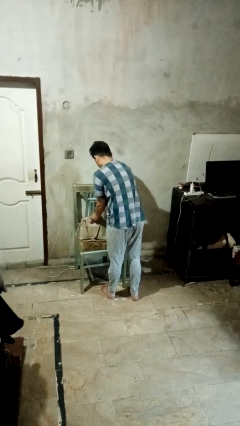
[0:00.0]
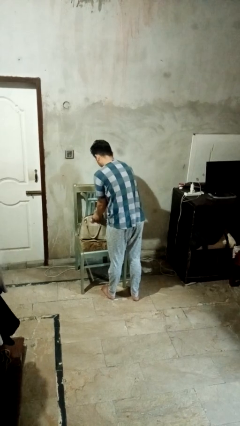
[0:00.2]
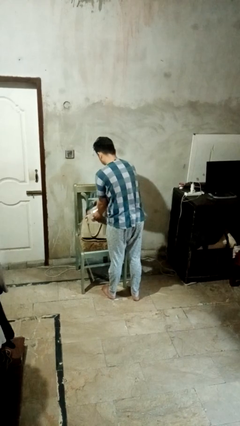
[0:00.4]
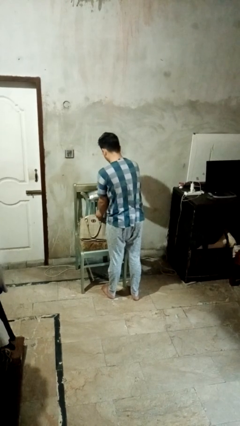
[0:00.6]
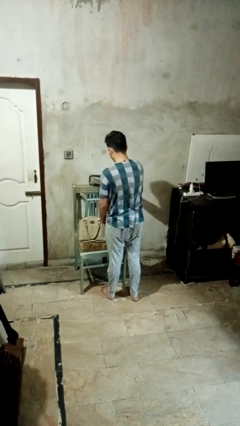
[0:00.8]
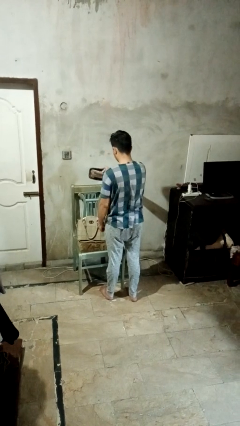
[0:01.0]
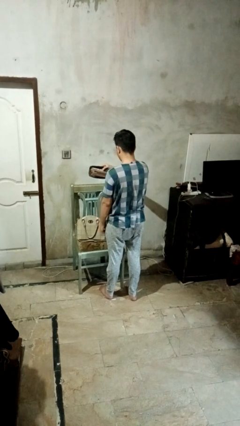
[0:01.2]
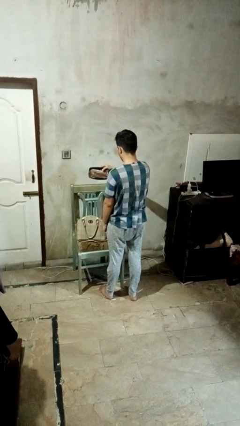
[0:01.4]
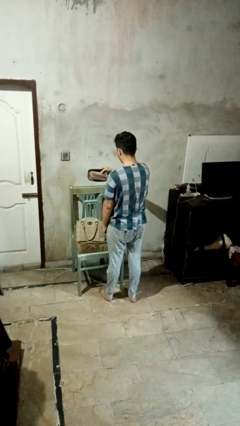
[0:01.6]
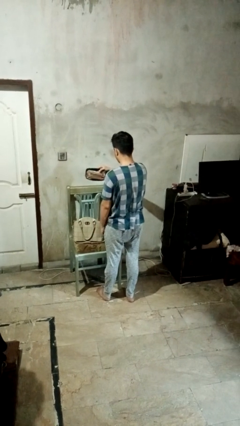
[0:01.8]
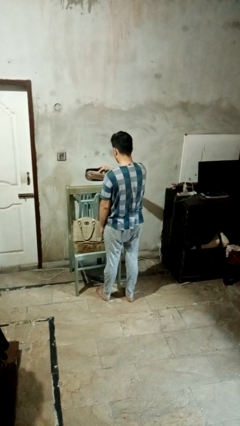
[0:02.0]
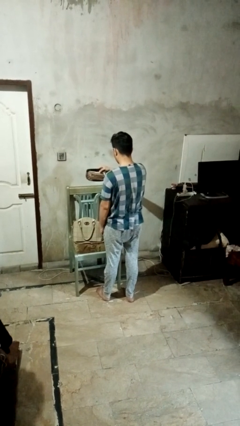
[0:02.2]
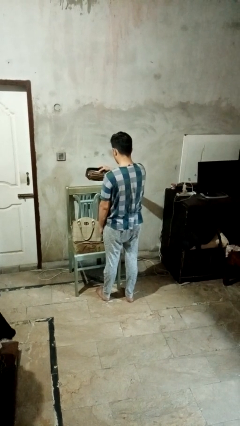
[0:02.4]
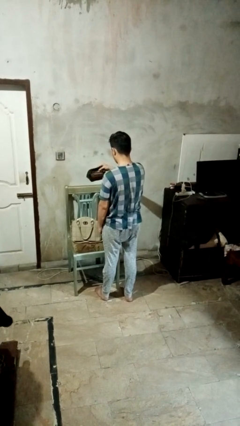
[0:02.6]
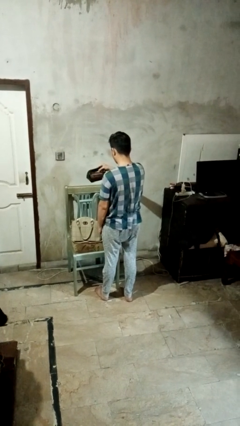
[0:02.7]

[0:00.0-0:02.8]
person takes object from purse

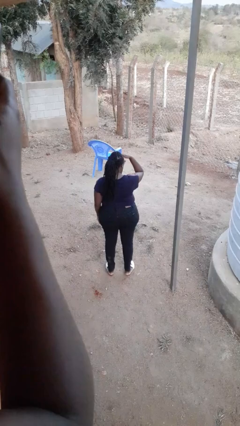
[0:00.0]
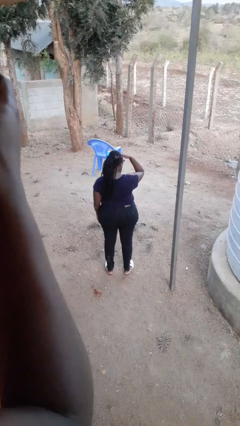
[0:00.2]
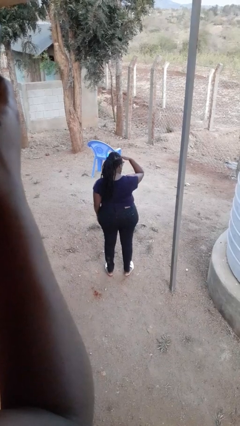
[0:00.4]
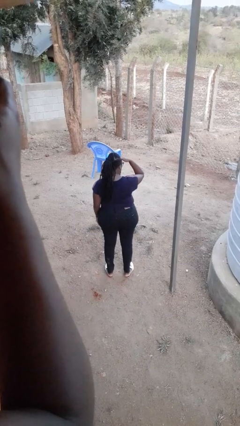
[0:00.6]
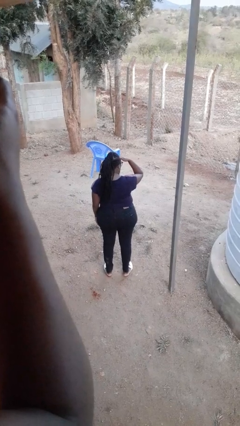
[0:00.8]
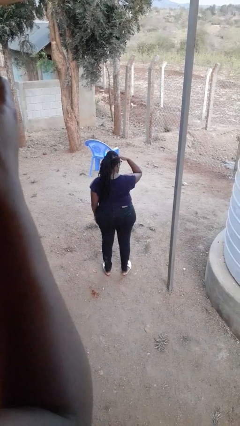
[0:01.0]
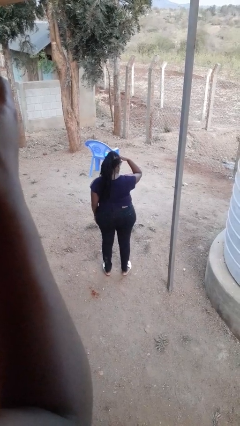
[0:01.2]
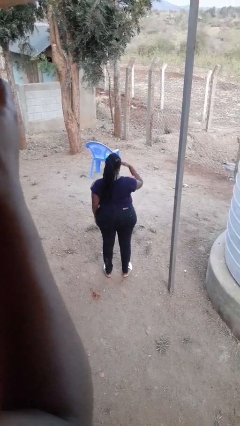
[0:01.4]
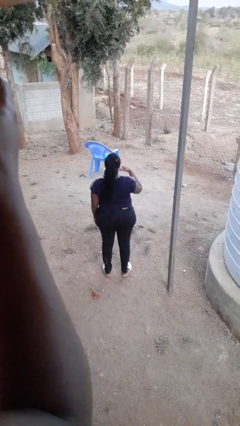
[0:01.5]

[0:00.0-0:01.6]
person shades eyes

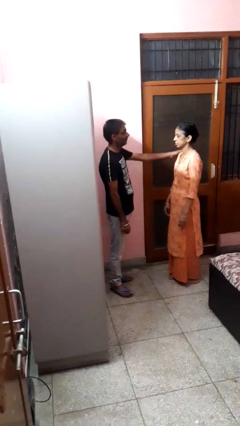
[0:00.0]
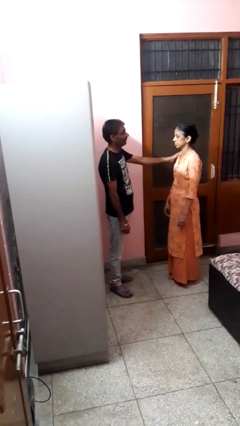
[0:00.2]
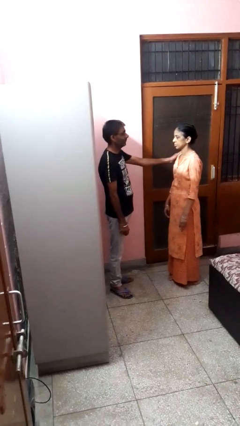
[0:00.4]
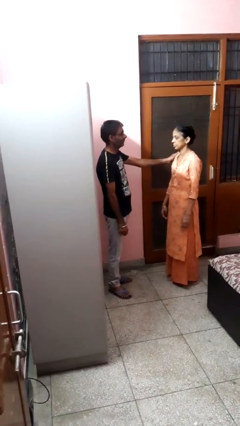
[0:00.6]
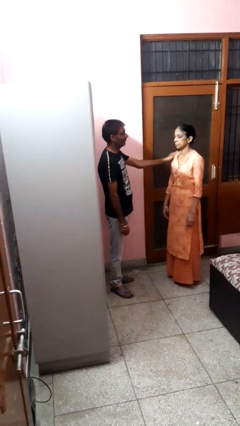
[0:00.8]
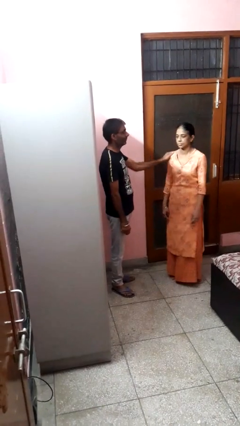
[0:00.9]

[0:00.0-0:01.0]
person grabs person by shoulder

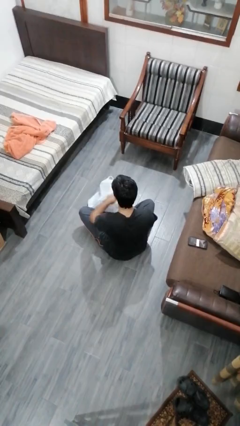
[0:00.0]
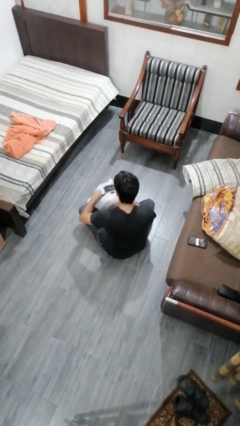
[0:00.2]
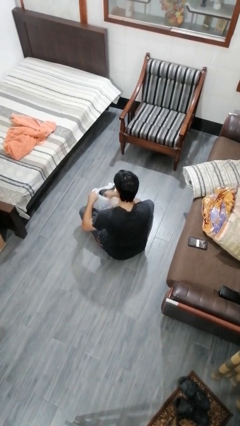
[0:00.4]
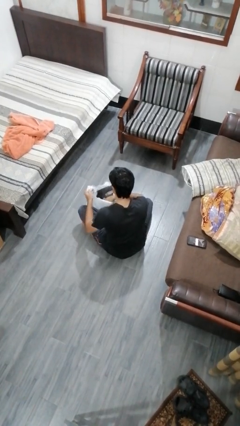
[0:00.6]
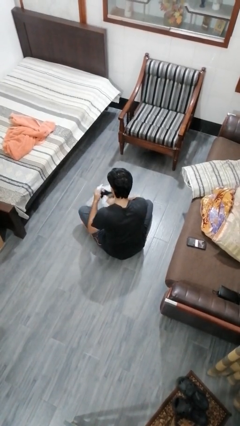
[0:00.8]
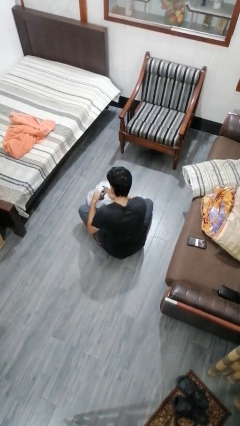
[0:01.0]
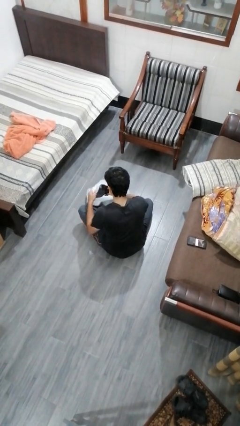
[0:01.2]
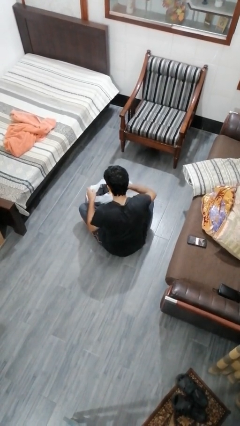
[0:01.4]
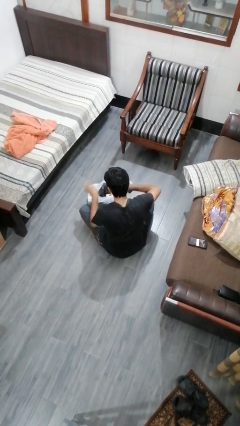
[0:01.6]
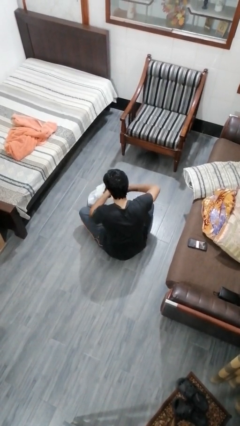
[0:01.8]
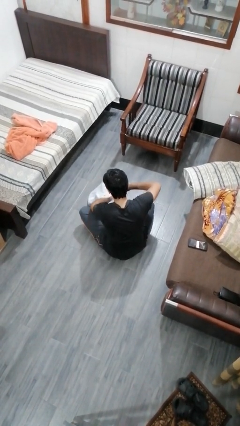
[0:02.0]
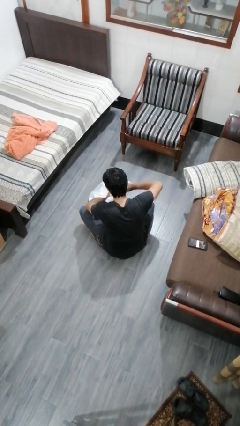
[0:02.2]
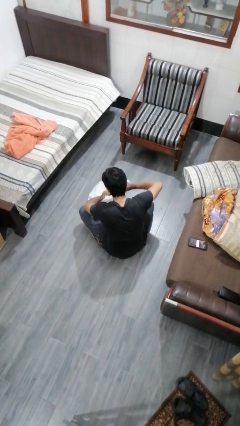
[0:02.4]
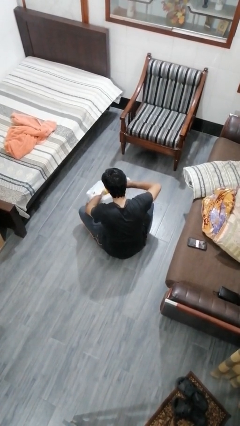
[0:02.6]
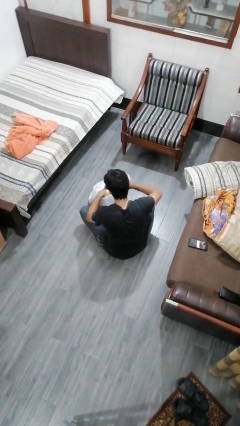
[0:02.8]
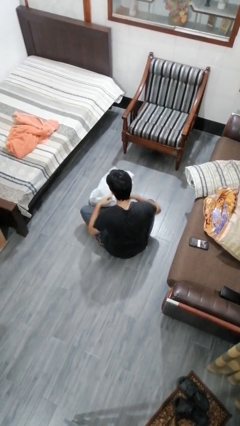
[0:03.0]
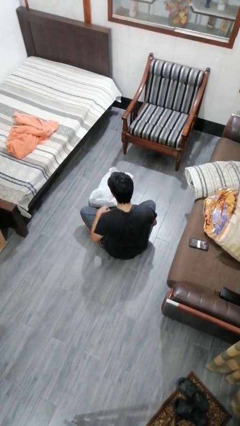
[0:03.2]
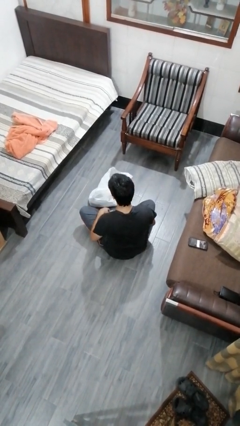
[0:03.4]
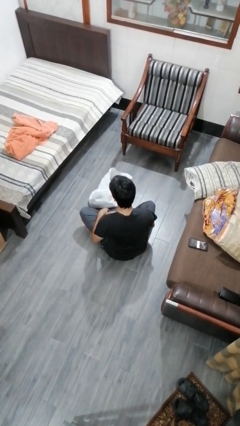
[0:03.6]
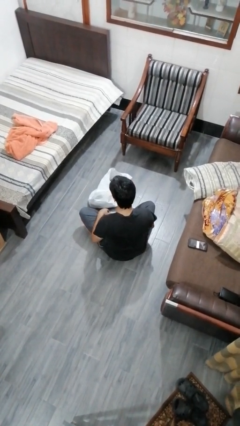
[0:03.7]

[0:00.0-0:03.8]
person searches in bag

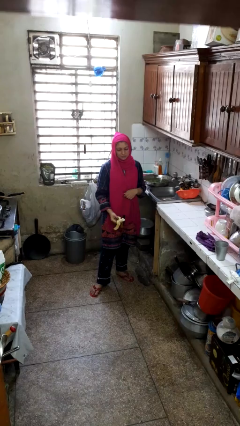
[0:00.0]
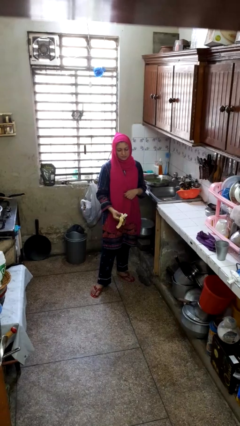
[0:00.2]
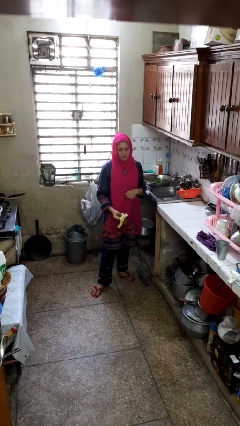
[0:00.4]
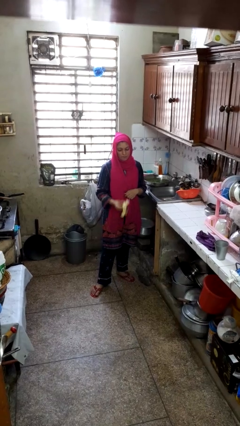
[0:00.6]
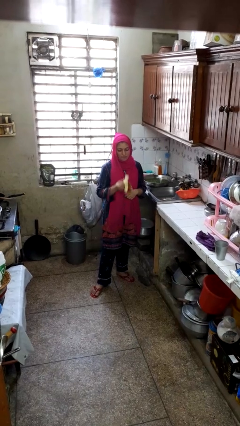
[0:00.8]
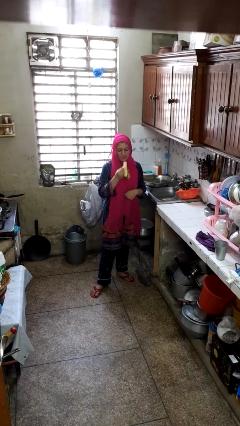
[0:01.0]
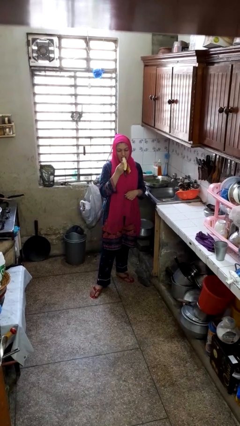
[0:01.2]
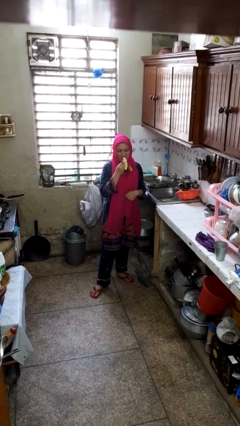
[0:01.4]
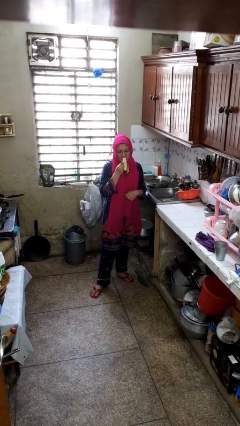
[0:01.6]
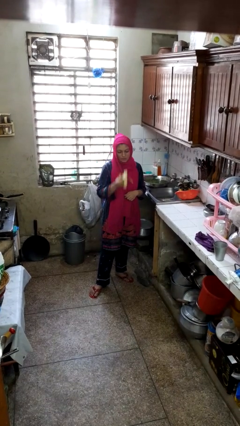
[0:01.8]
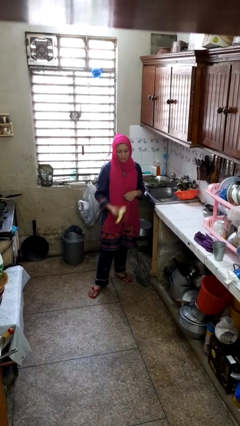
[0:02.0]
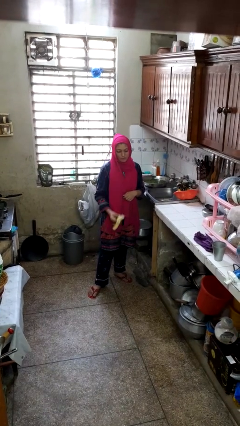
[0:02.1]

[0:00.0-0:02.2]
person eats banana

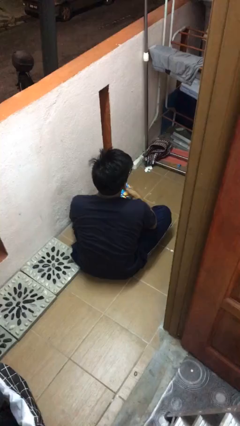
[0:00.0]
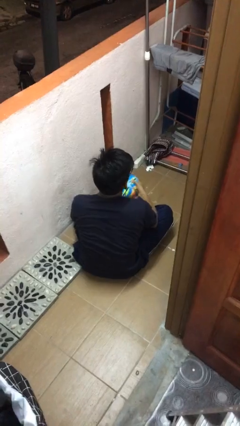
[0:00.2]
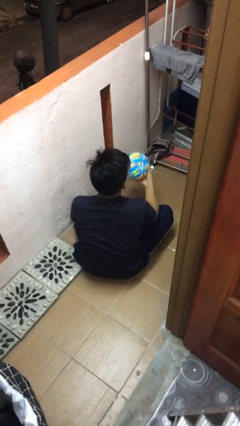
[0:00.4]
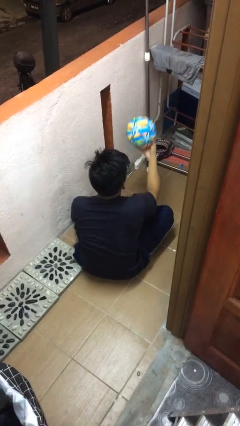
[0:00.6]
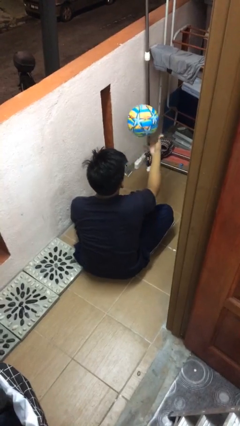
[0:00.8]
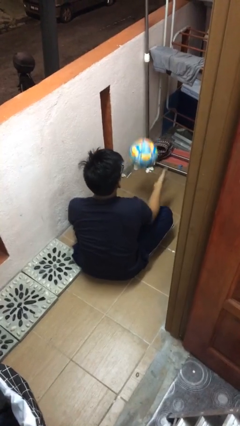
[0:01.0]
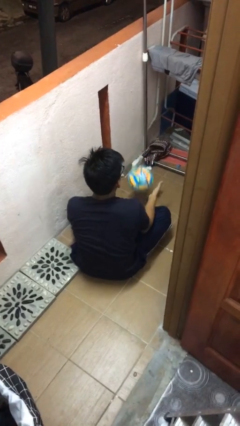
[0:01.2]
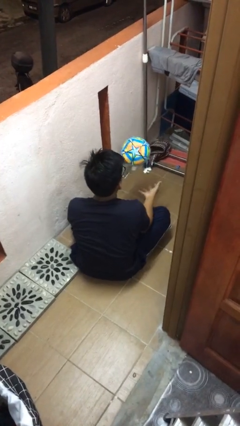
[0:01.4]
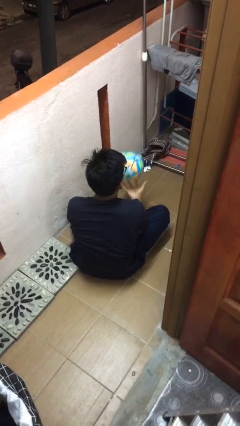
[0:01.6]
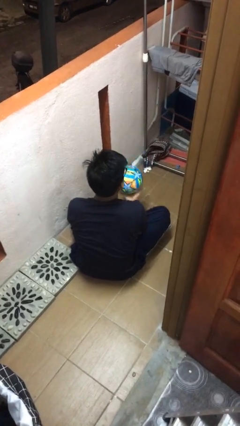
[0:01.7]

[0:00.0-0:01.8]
person bounces ball on floor

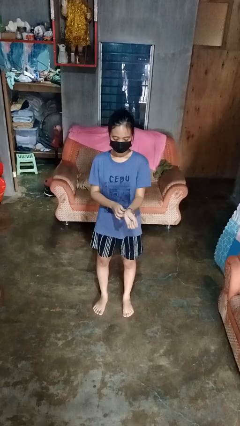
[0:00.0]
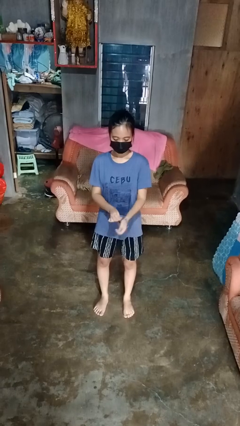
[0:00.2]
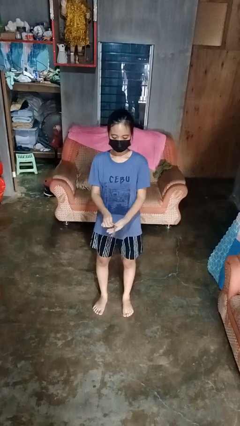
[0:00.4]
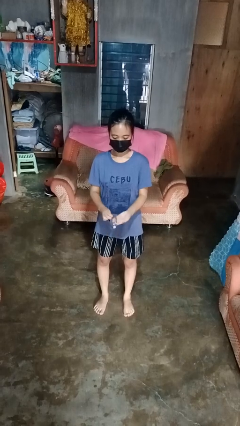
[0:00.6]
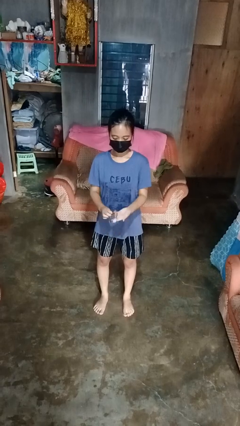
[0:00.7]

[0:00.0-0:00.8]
person takes off wristwatch

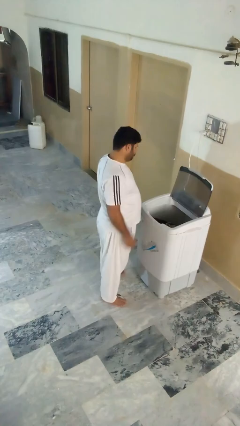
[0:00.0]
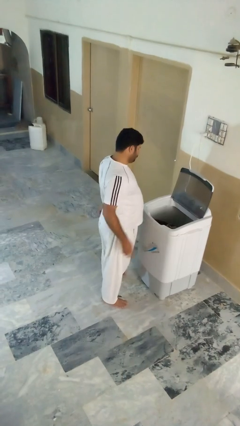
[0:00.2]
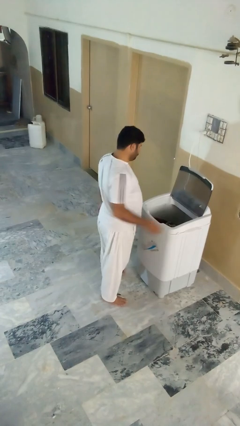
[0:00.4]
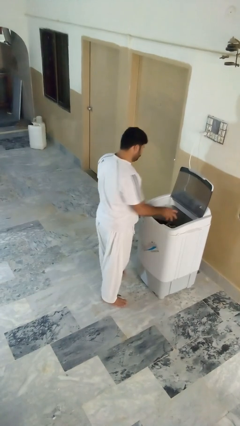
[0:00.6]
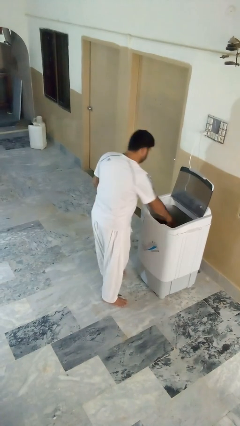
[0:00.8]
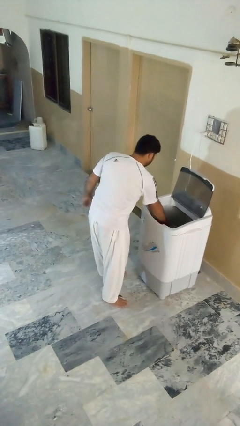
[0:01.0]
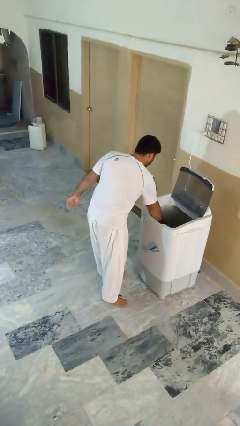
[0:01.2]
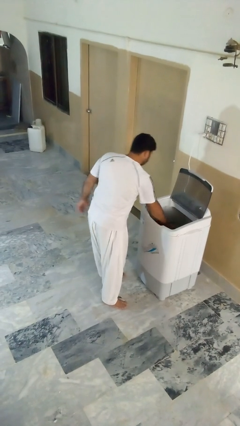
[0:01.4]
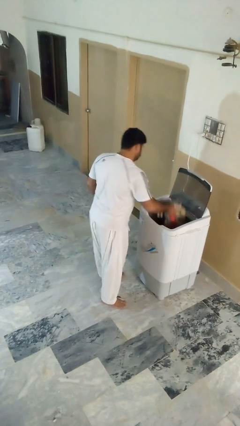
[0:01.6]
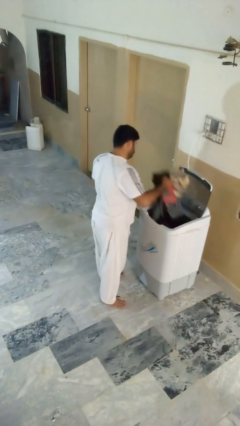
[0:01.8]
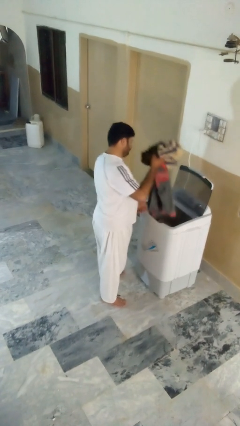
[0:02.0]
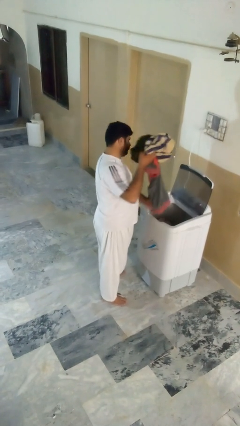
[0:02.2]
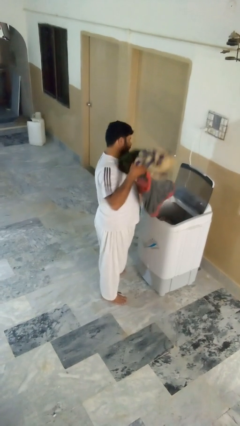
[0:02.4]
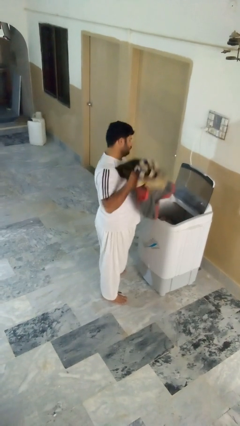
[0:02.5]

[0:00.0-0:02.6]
person unloads clotheswasher

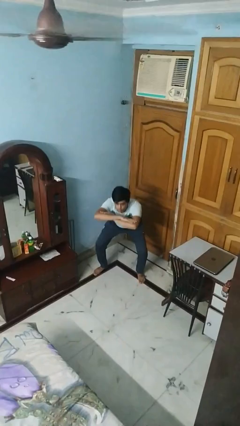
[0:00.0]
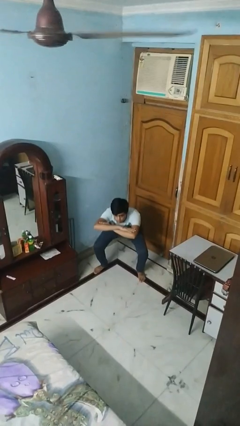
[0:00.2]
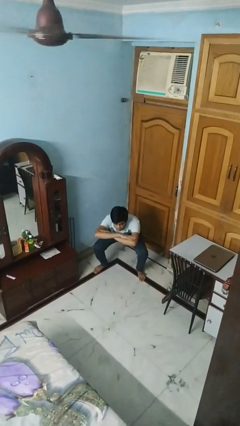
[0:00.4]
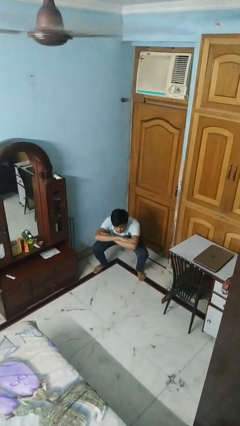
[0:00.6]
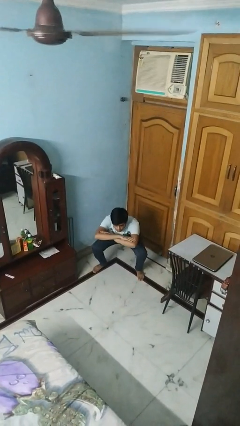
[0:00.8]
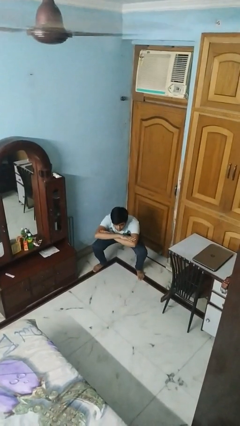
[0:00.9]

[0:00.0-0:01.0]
person squats
